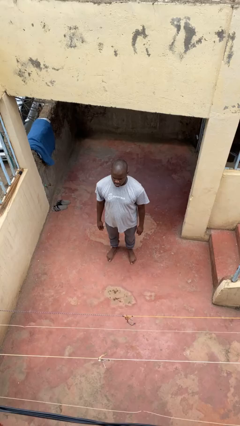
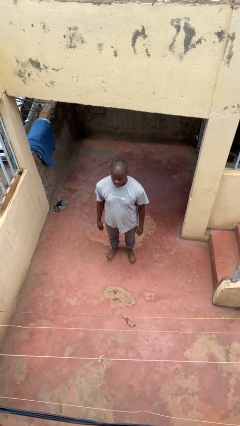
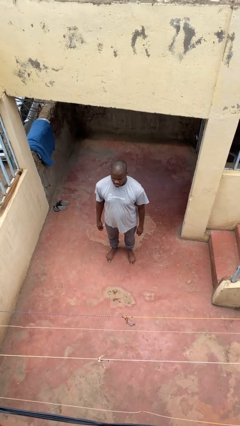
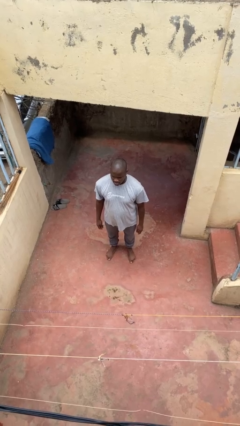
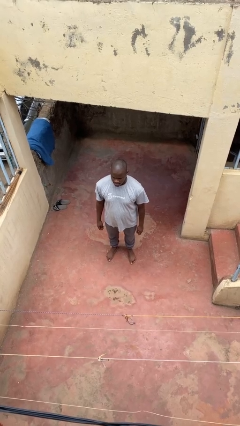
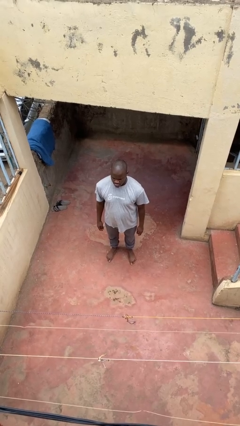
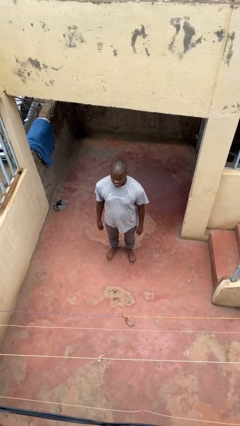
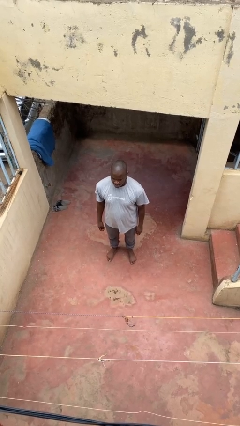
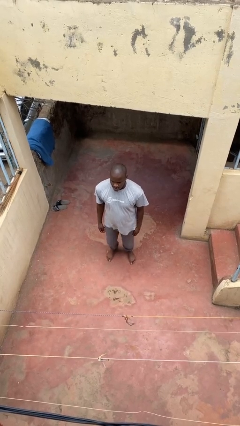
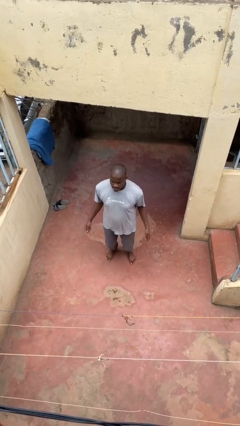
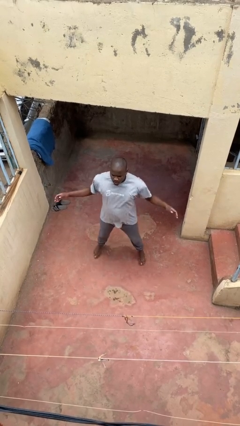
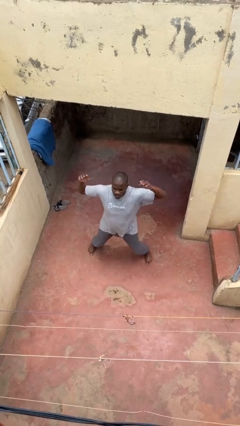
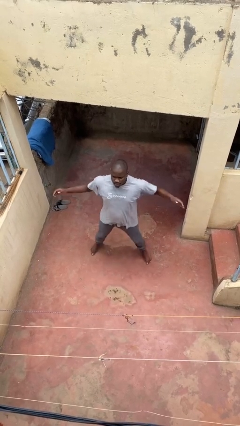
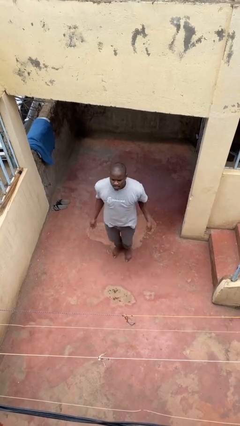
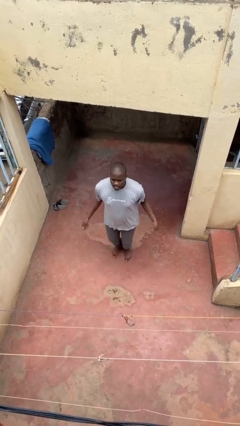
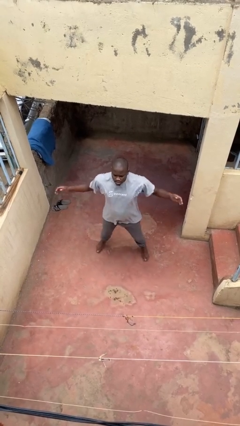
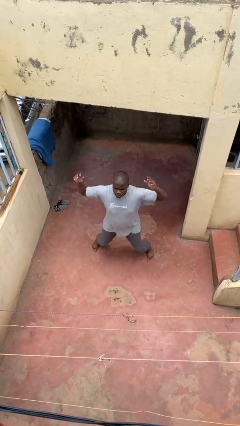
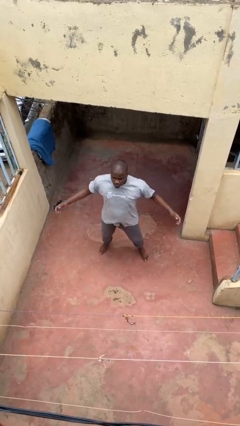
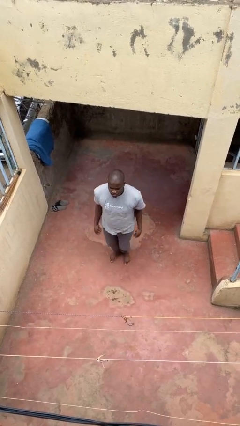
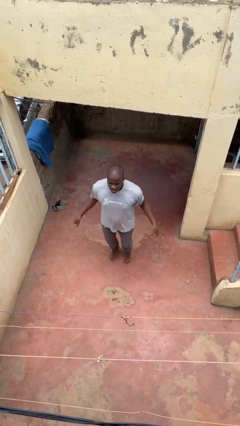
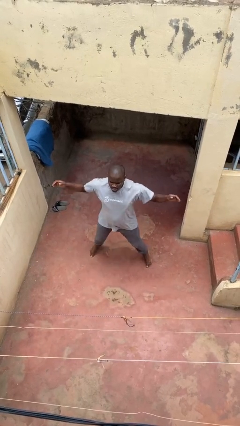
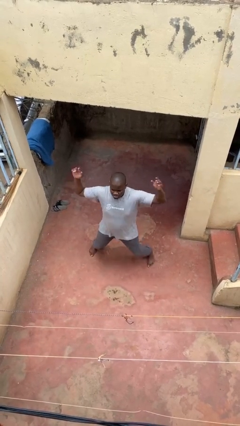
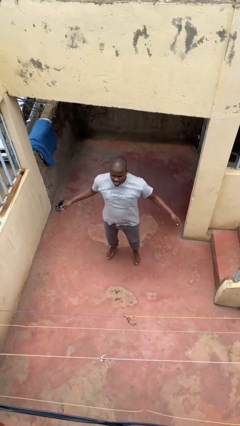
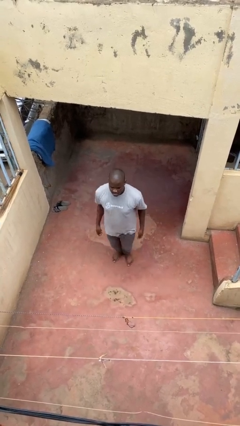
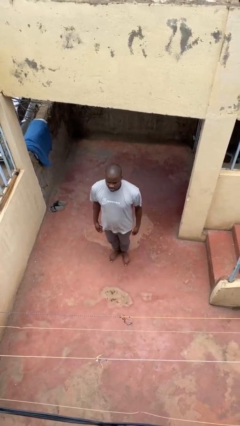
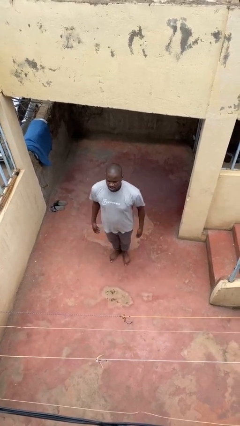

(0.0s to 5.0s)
person exercises with jumping jacks

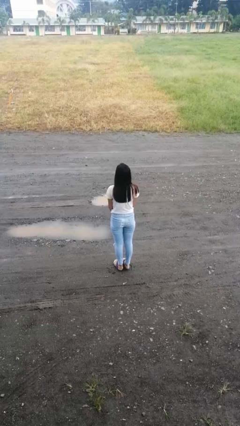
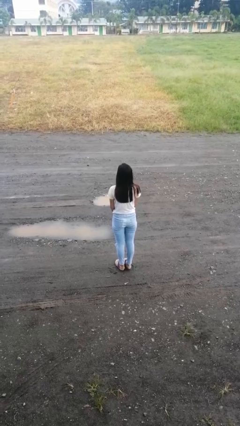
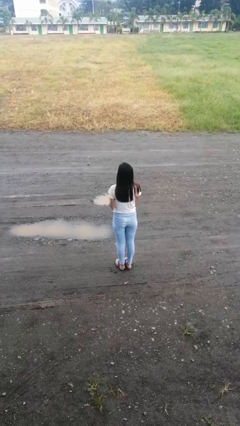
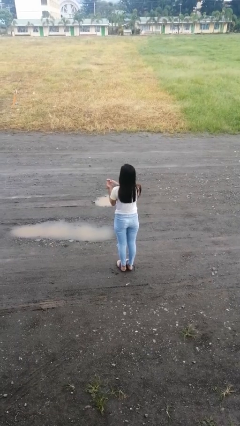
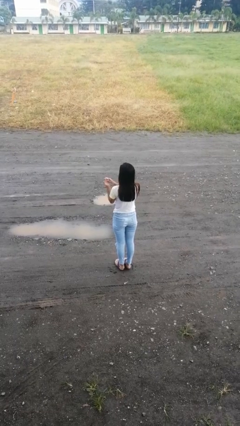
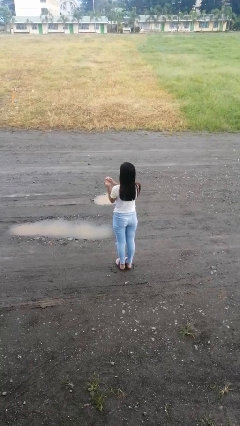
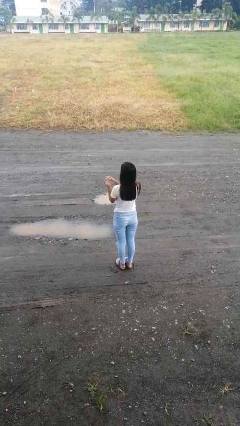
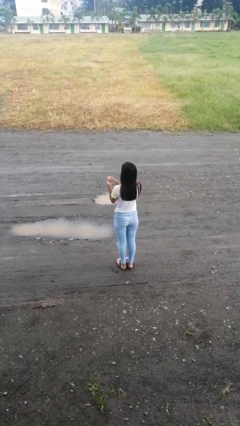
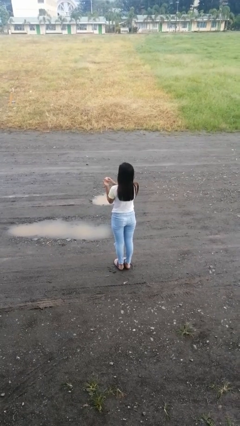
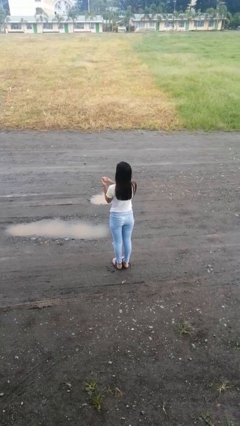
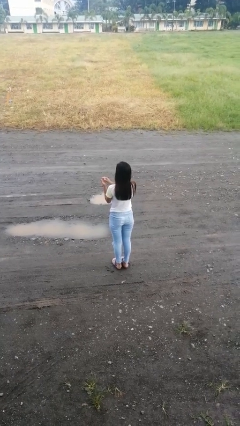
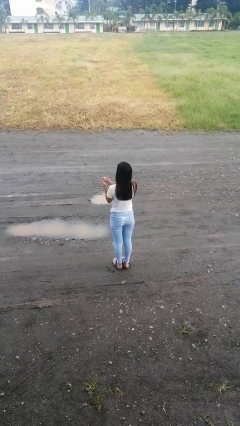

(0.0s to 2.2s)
person cracks knuckles

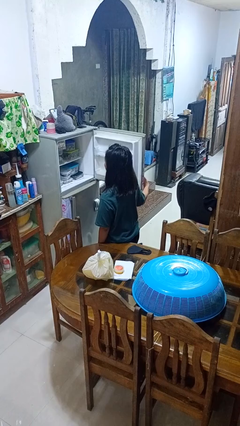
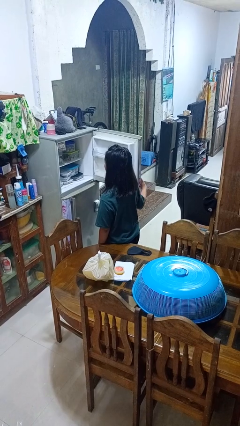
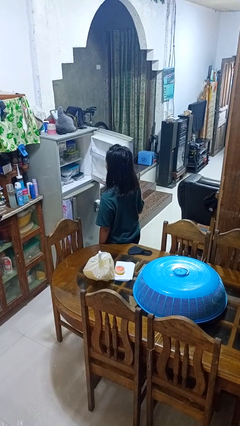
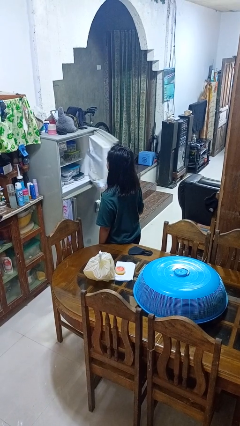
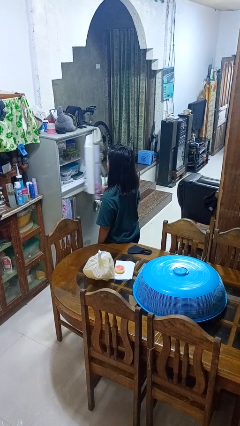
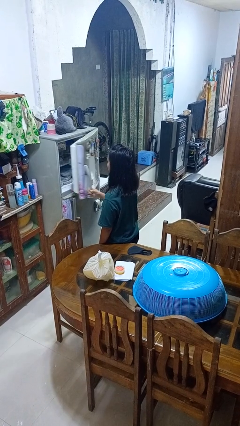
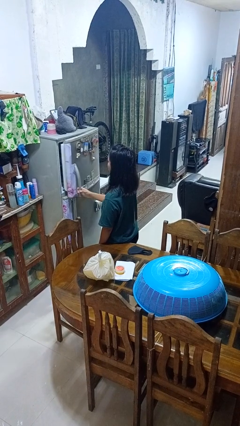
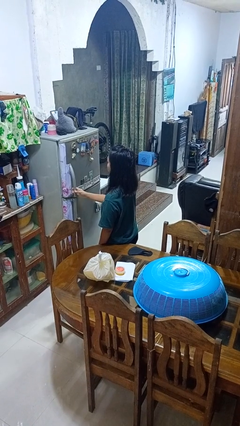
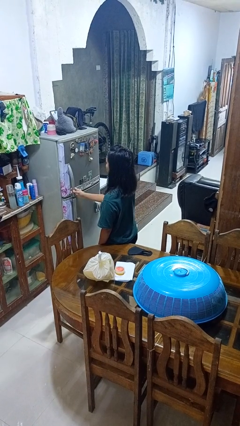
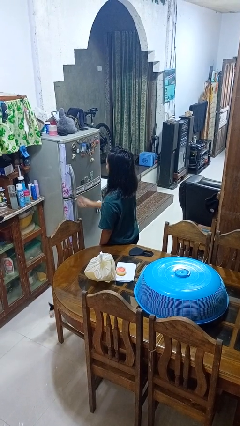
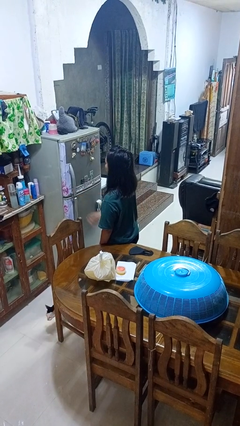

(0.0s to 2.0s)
person closes refrigerator

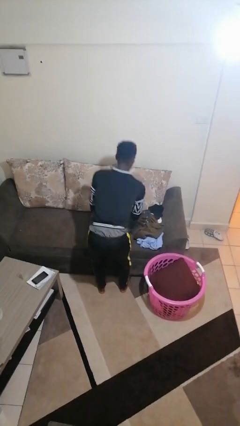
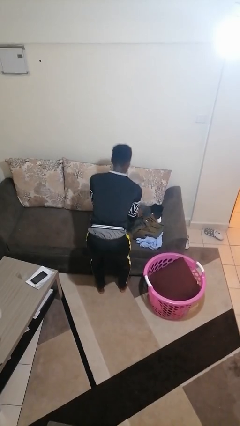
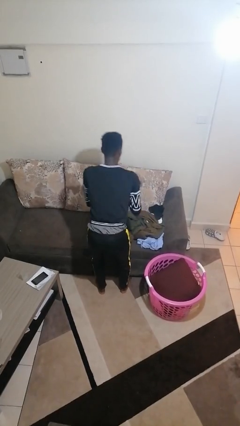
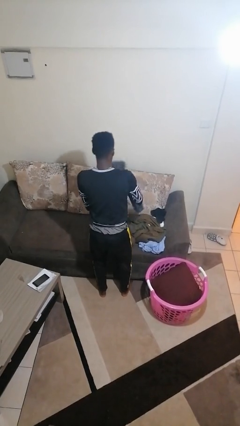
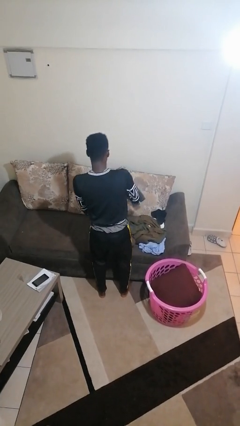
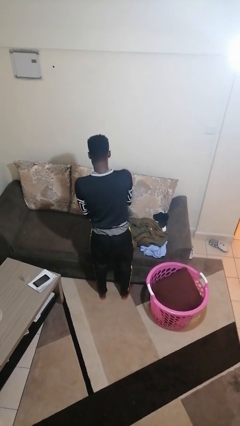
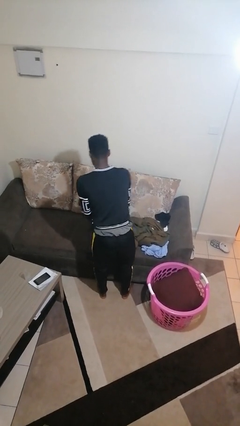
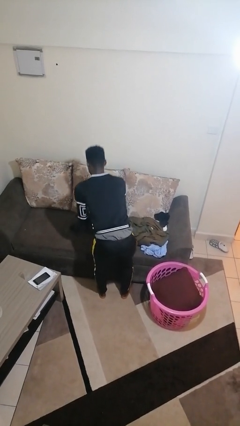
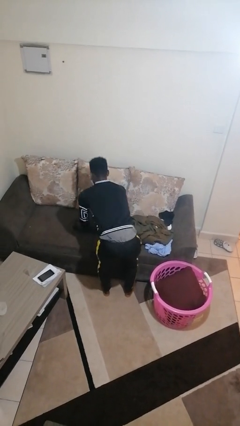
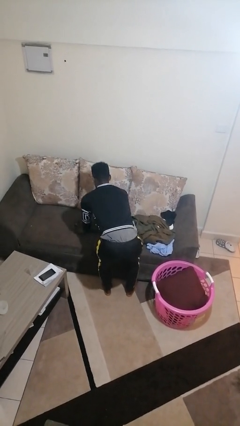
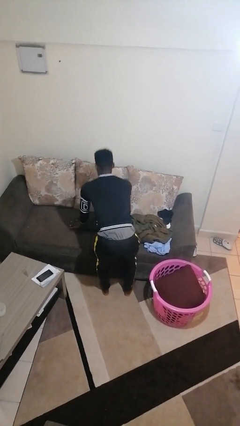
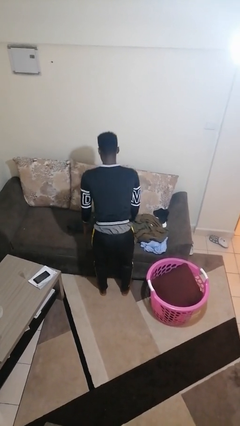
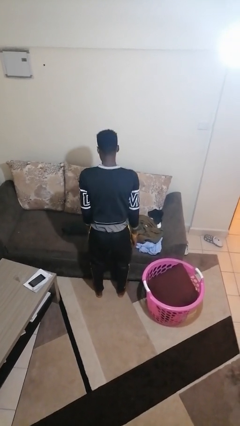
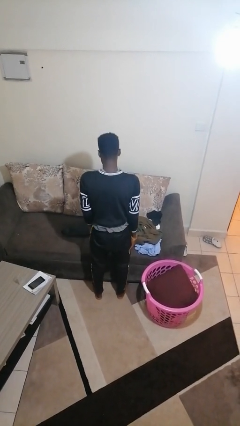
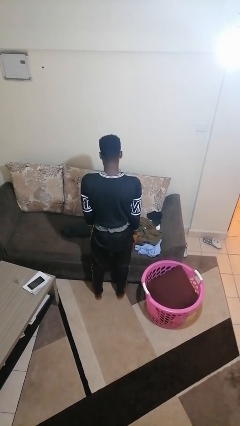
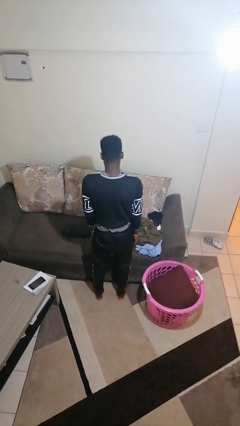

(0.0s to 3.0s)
person folds pants

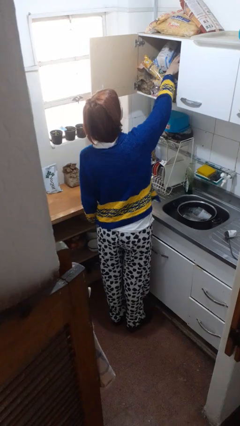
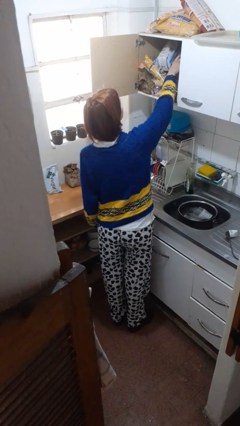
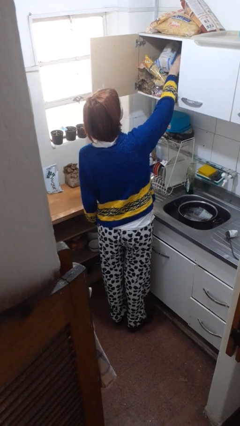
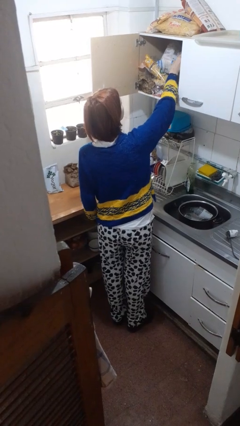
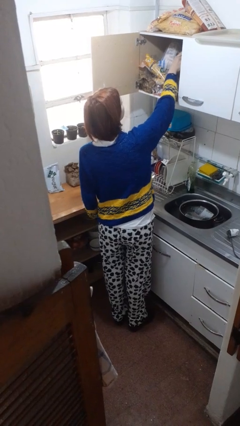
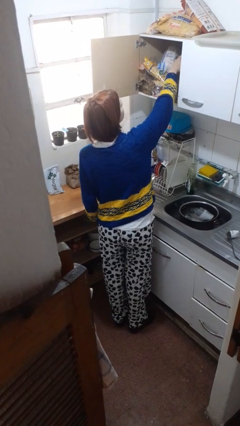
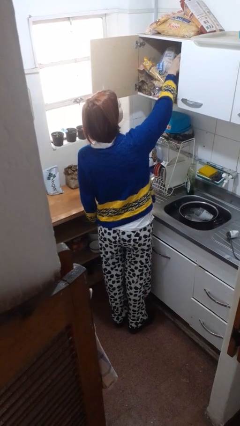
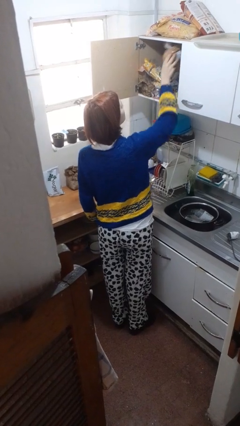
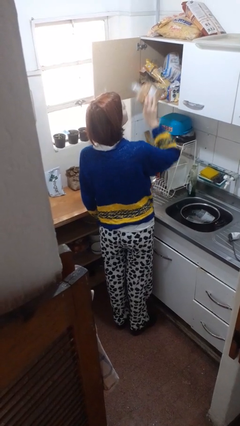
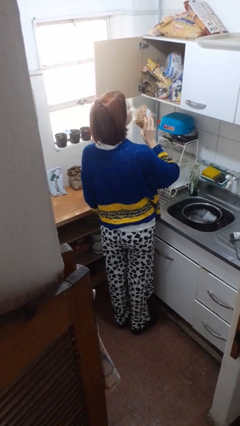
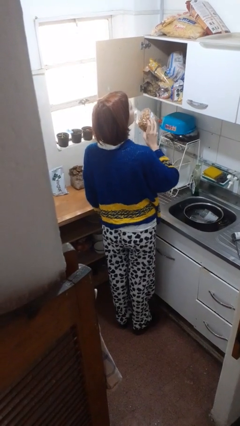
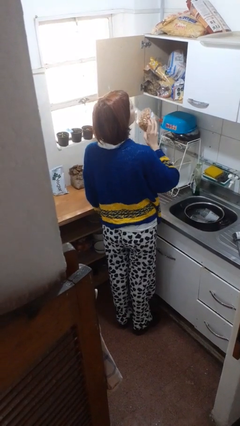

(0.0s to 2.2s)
person takes object from cabinet

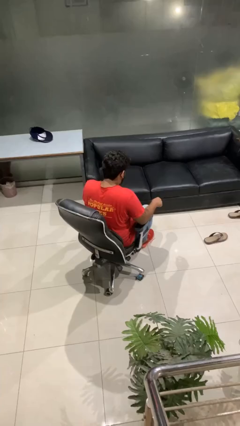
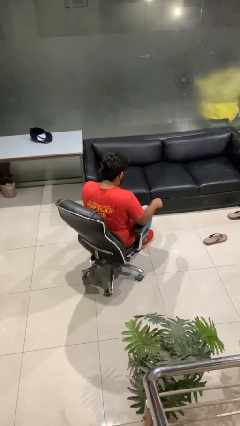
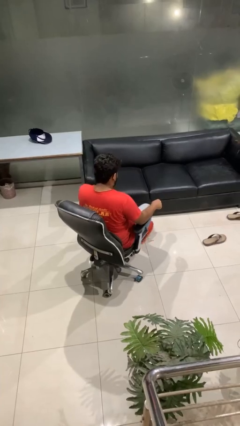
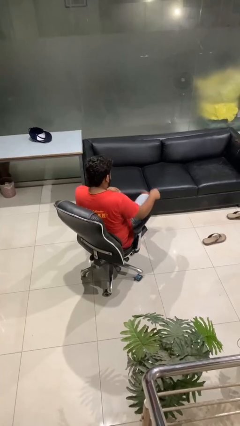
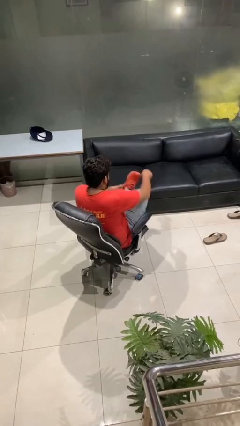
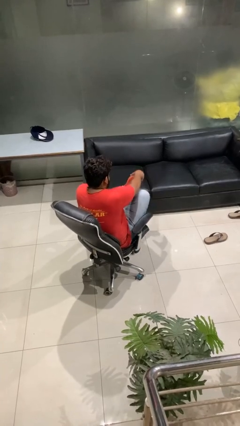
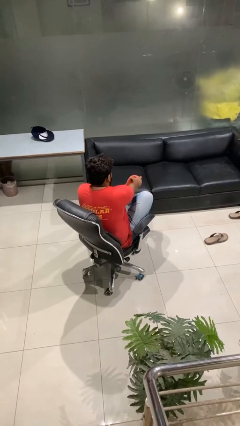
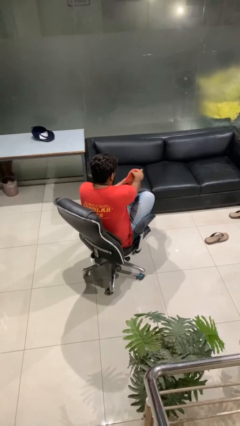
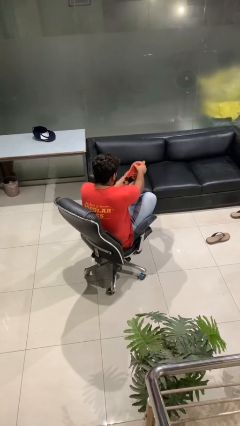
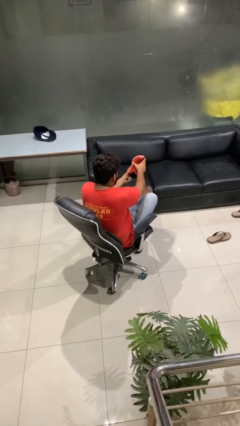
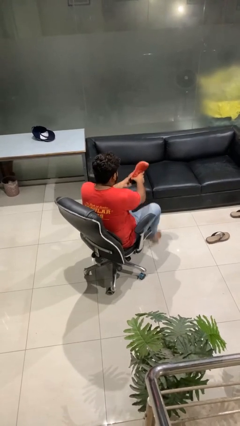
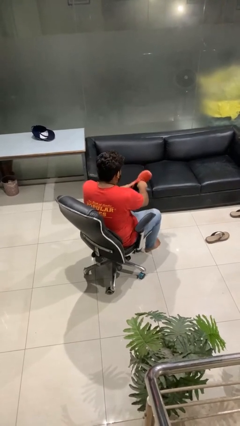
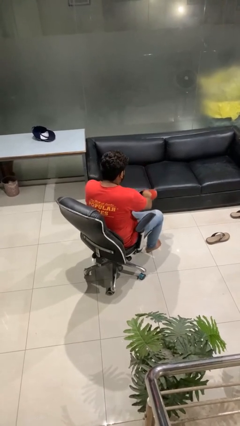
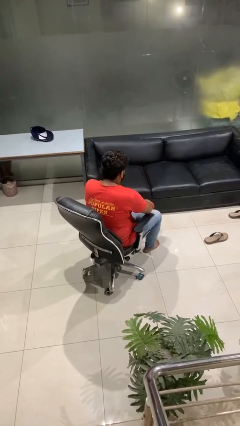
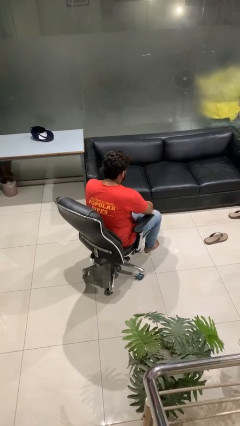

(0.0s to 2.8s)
person takes off shoes

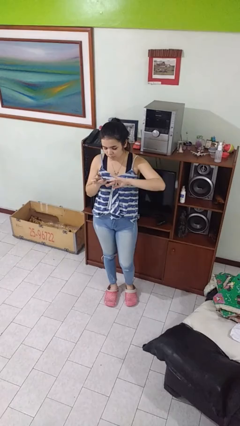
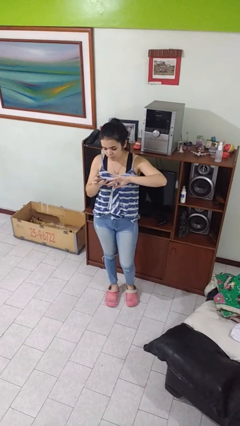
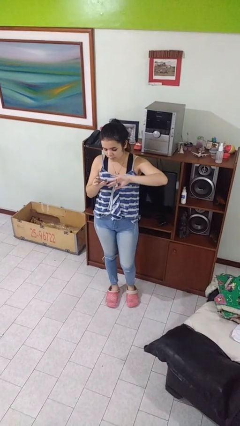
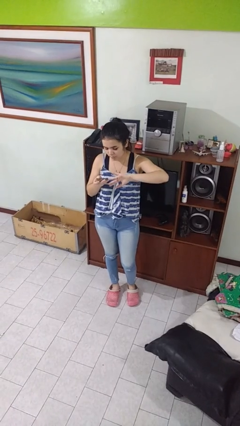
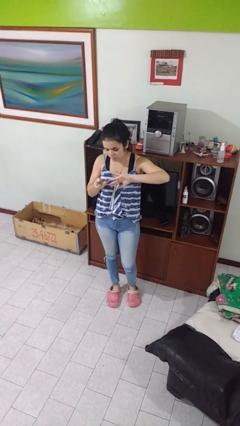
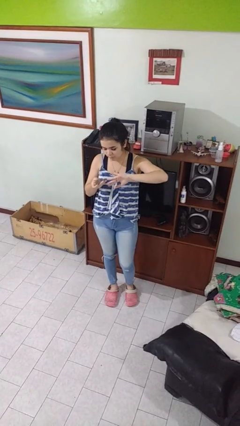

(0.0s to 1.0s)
person clips fingernails
